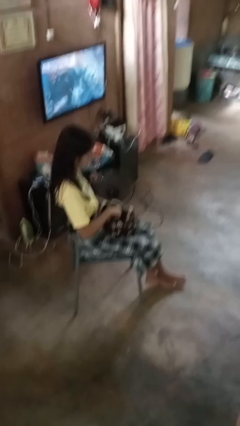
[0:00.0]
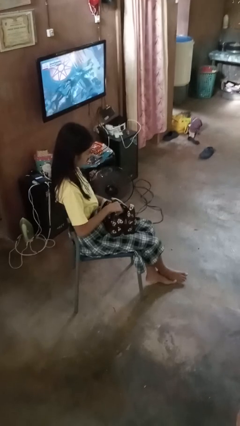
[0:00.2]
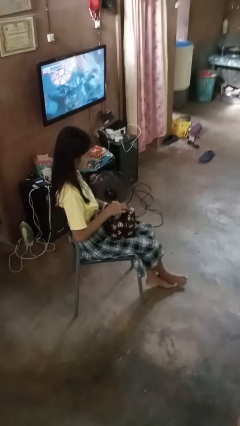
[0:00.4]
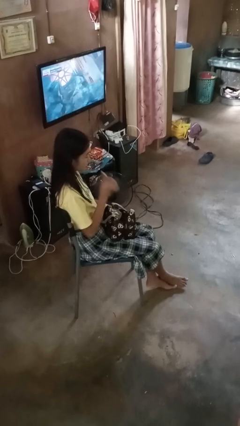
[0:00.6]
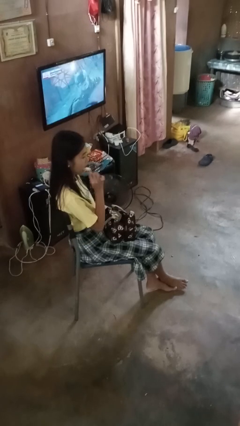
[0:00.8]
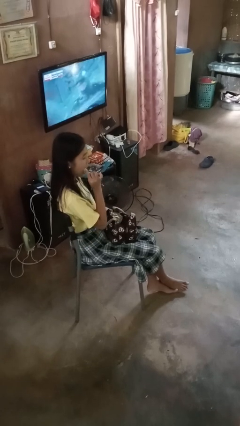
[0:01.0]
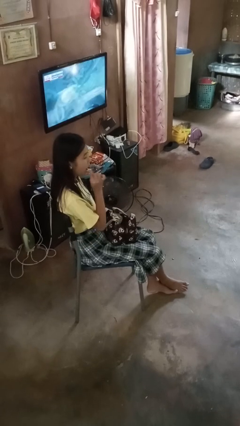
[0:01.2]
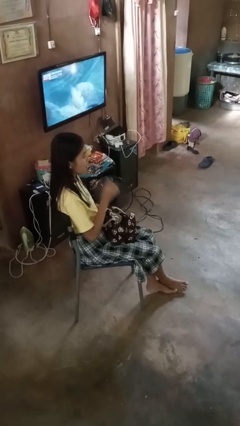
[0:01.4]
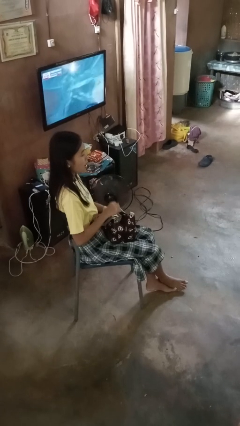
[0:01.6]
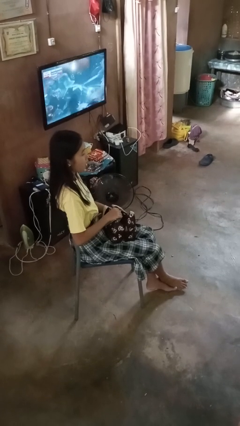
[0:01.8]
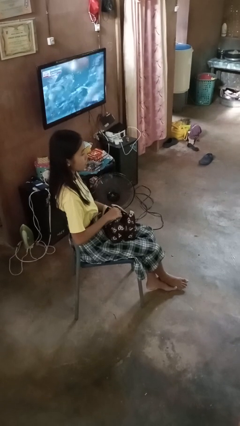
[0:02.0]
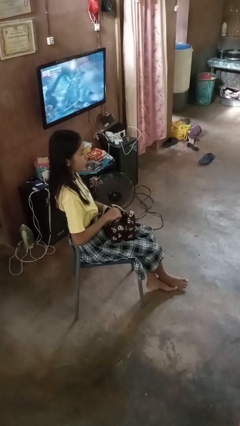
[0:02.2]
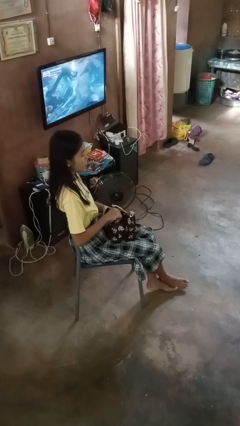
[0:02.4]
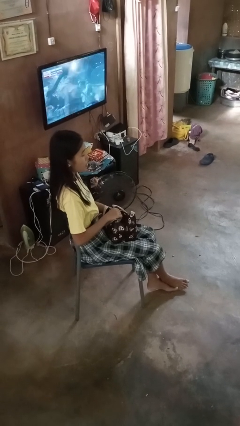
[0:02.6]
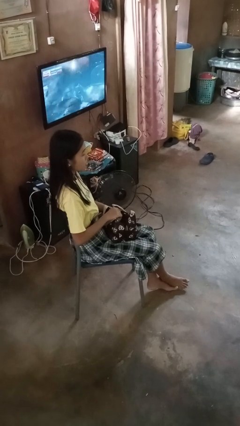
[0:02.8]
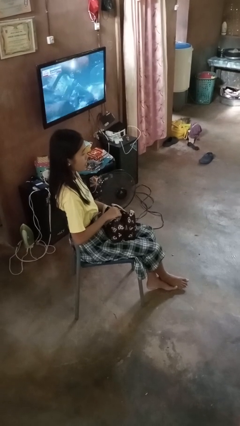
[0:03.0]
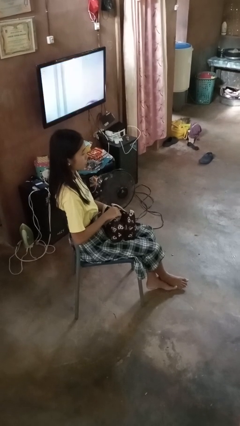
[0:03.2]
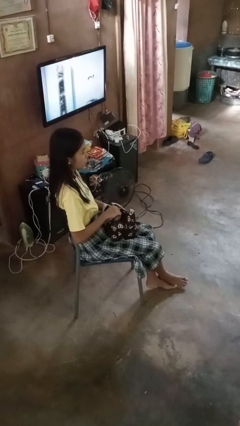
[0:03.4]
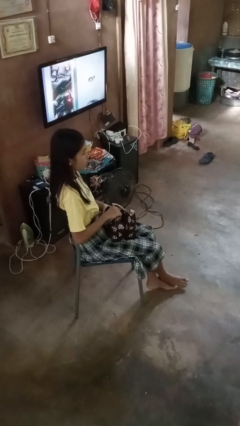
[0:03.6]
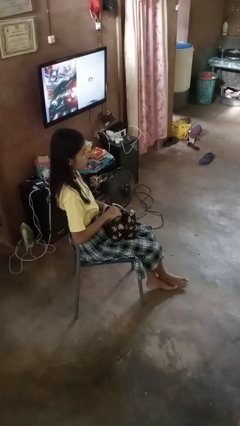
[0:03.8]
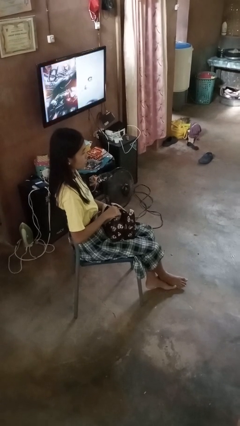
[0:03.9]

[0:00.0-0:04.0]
person eats snack from bag

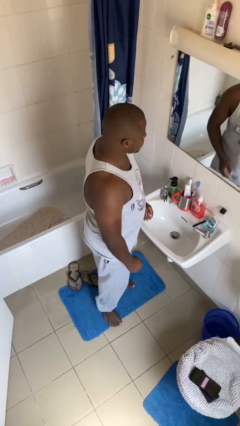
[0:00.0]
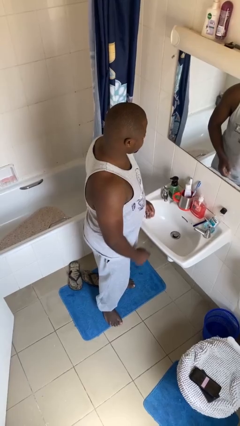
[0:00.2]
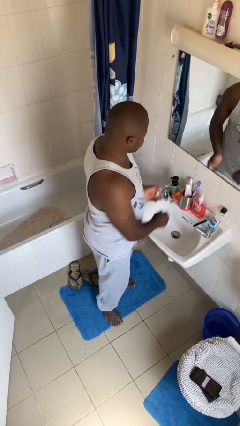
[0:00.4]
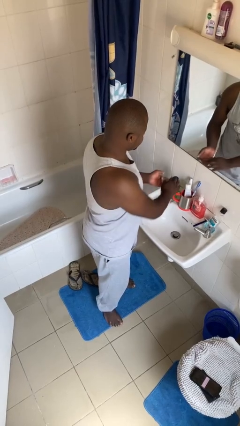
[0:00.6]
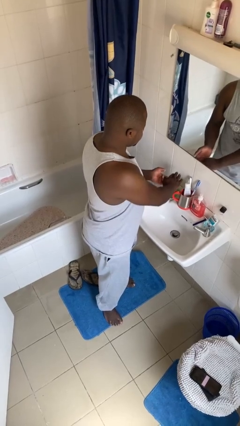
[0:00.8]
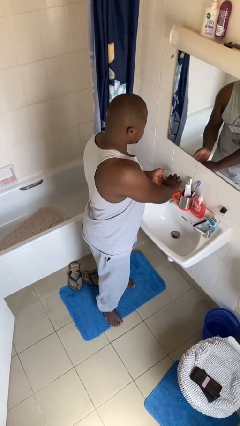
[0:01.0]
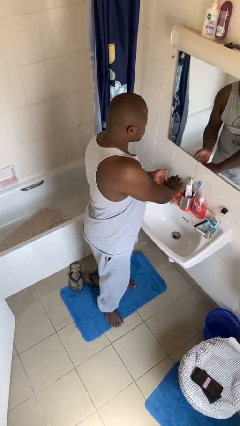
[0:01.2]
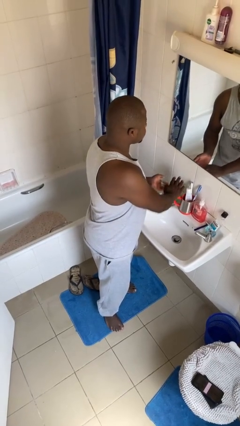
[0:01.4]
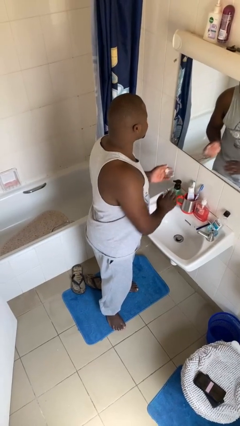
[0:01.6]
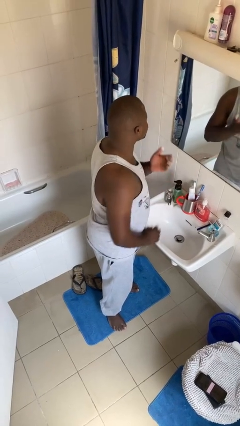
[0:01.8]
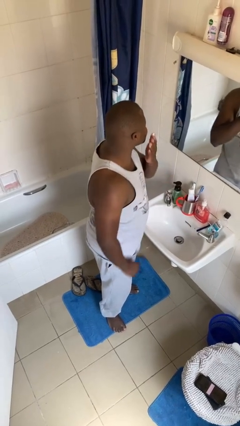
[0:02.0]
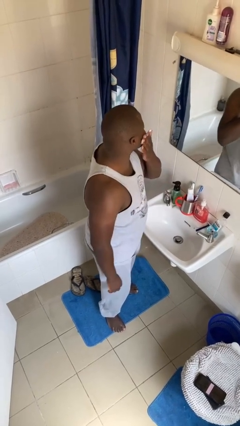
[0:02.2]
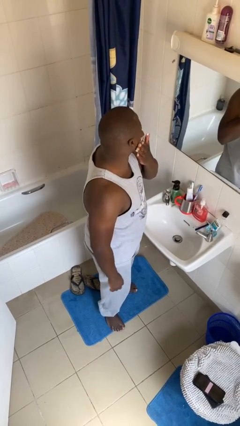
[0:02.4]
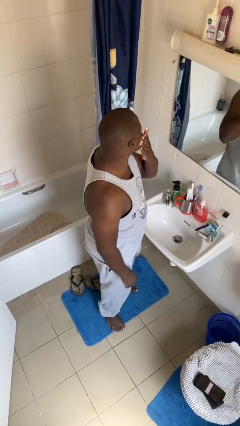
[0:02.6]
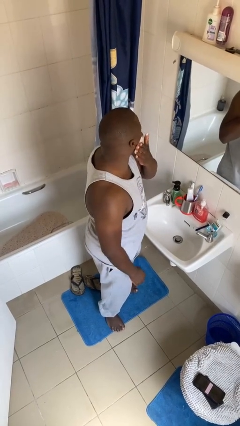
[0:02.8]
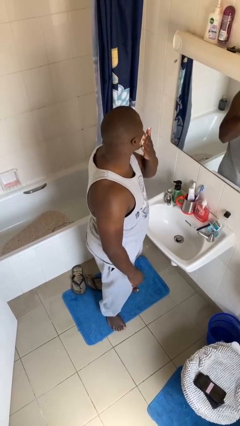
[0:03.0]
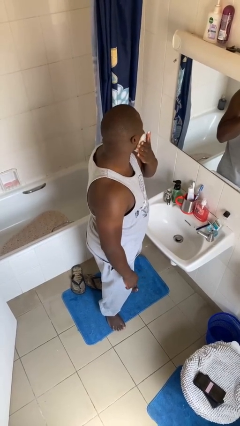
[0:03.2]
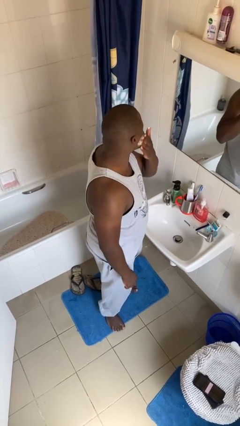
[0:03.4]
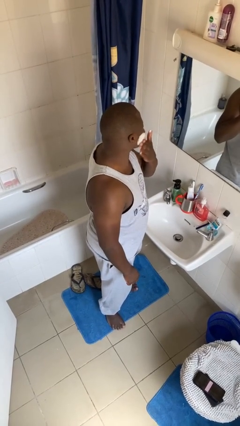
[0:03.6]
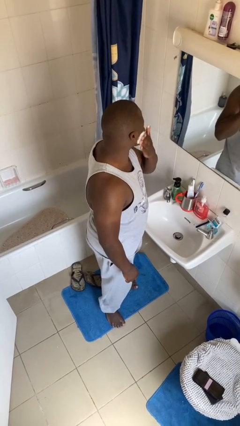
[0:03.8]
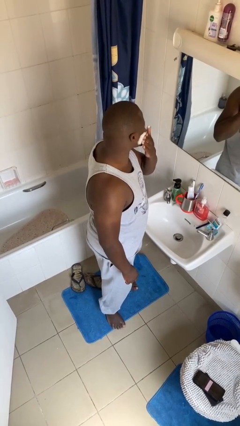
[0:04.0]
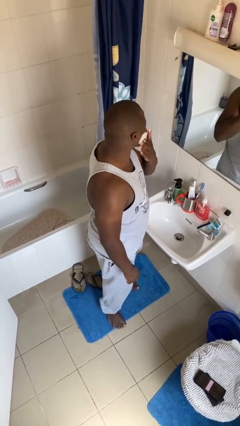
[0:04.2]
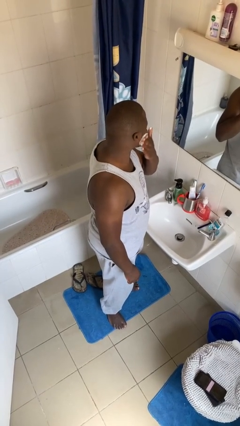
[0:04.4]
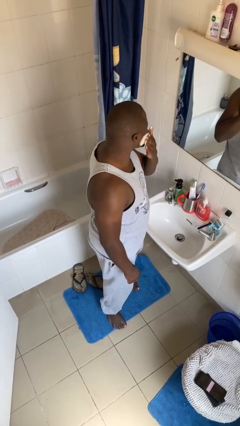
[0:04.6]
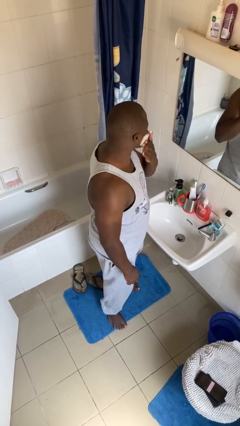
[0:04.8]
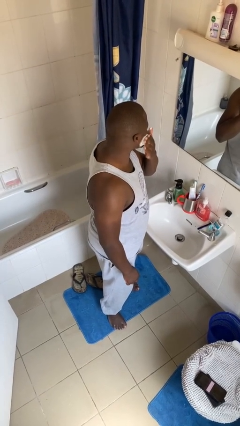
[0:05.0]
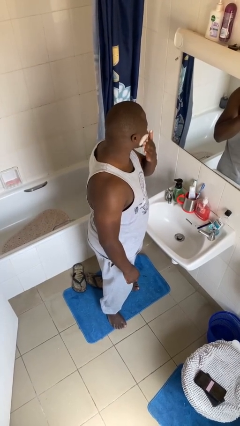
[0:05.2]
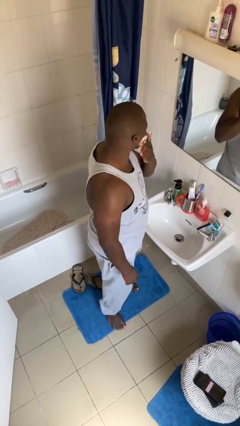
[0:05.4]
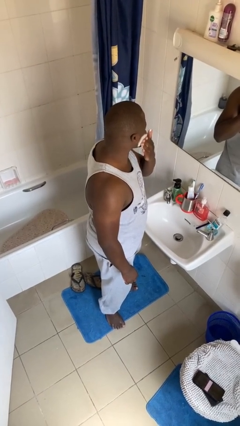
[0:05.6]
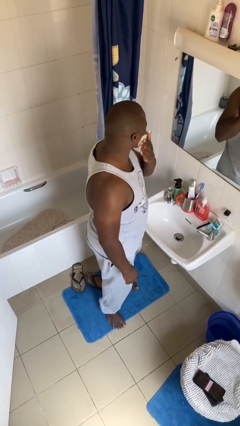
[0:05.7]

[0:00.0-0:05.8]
person applies shaving cream

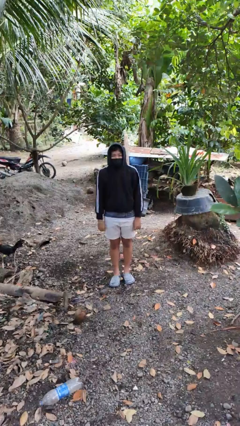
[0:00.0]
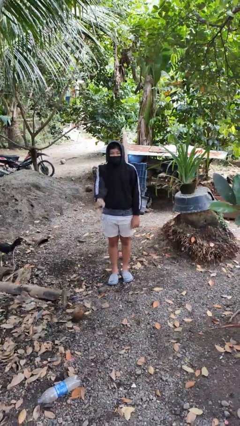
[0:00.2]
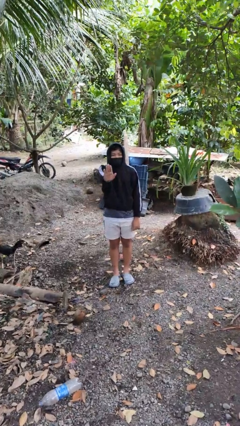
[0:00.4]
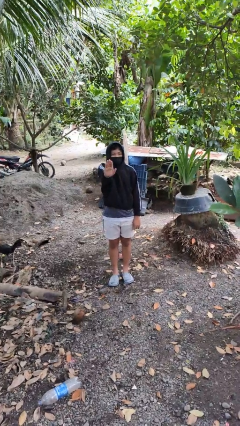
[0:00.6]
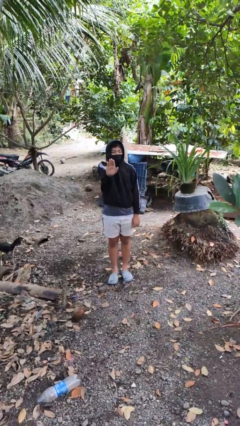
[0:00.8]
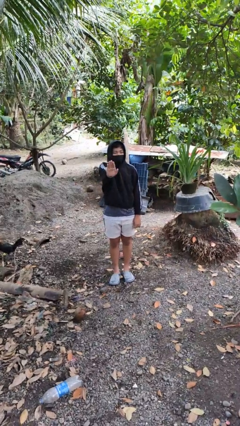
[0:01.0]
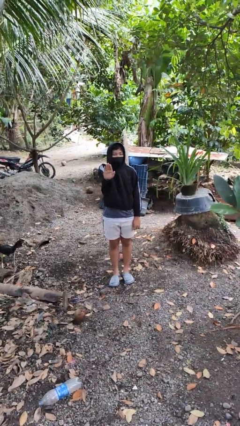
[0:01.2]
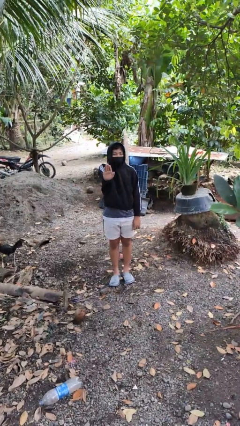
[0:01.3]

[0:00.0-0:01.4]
person gestures stop

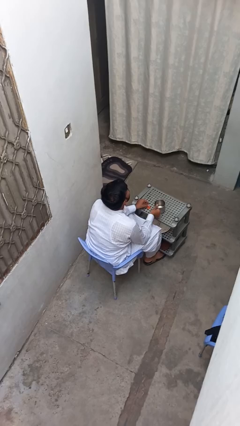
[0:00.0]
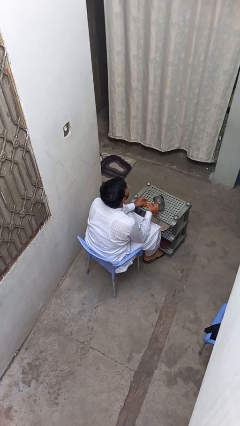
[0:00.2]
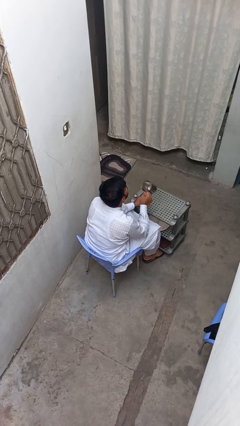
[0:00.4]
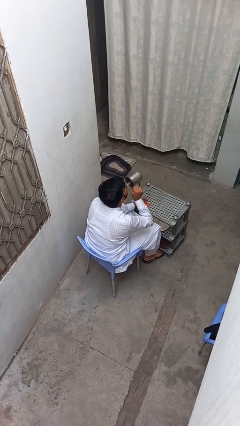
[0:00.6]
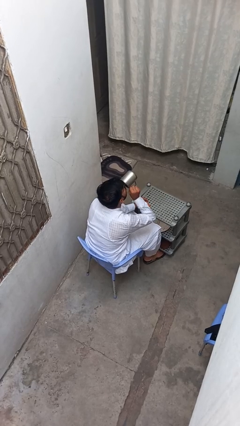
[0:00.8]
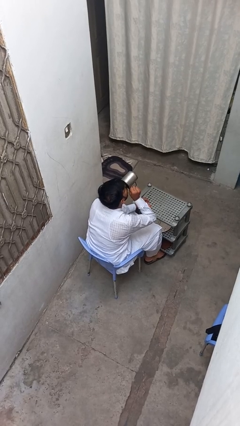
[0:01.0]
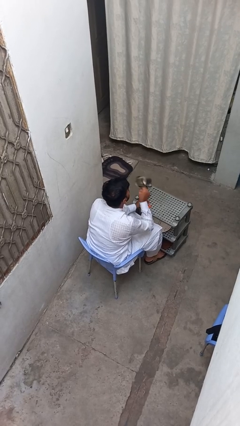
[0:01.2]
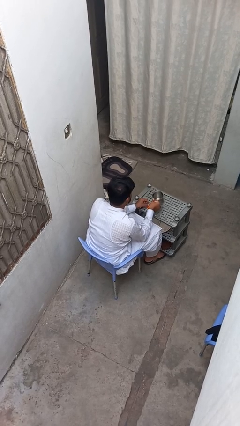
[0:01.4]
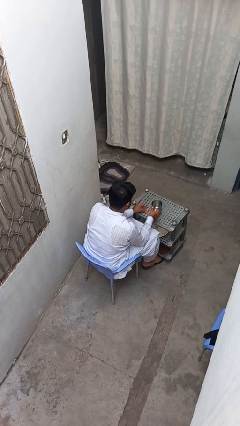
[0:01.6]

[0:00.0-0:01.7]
person drinks from cup

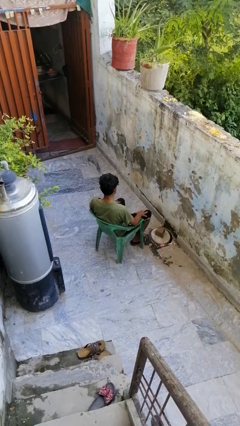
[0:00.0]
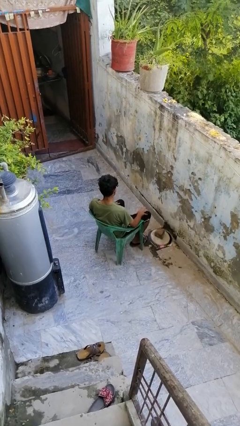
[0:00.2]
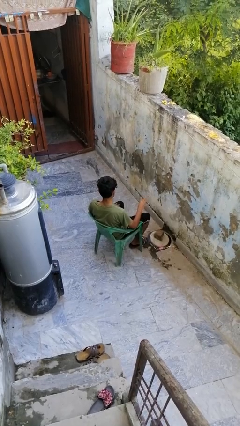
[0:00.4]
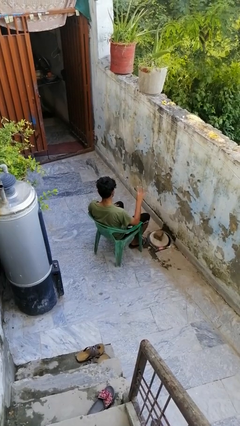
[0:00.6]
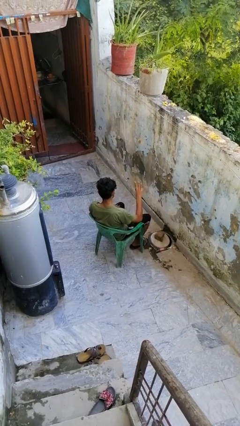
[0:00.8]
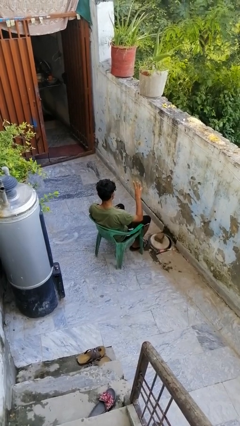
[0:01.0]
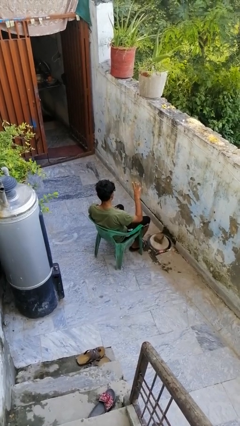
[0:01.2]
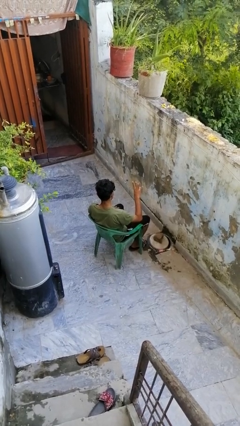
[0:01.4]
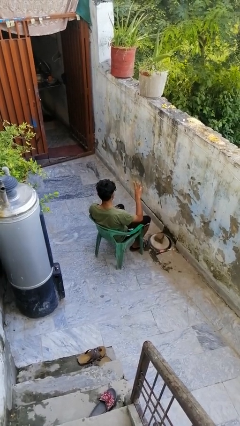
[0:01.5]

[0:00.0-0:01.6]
person gestures number four

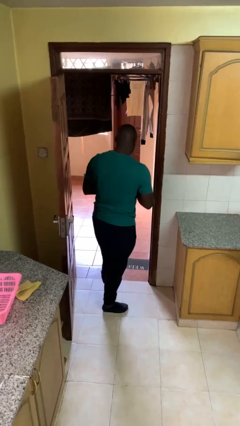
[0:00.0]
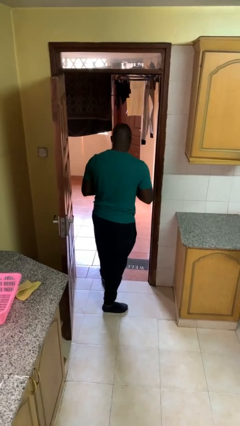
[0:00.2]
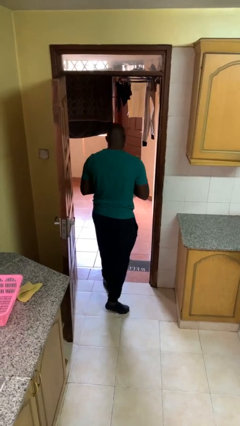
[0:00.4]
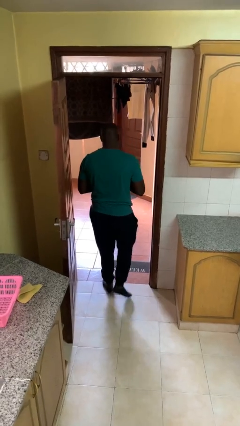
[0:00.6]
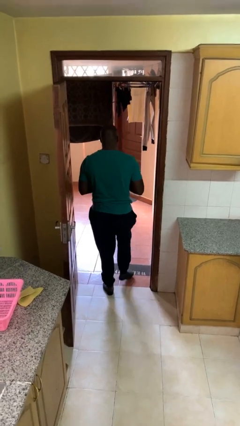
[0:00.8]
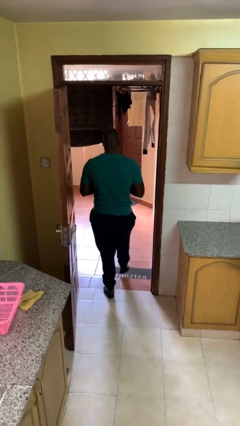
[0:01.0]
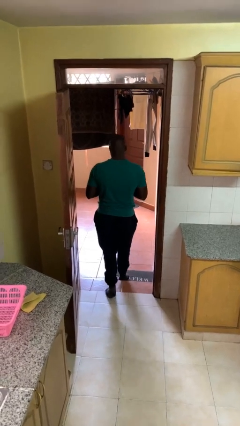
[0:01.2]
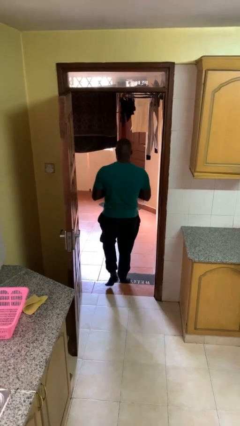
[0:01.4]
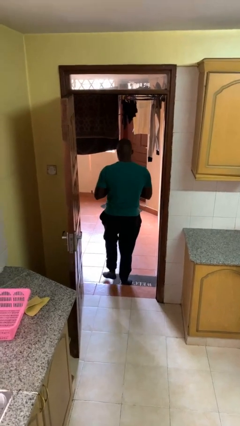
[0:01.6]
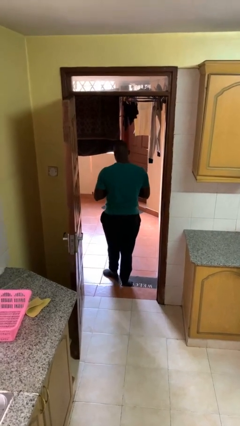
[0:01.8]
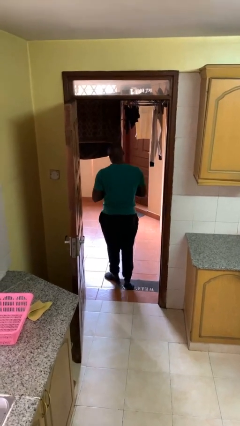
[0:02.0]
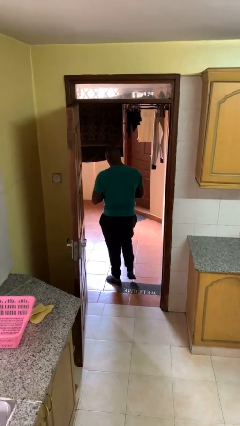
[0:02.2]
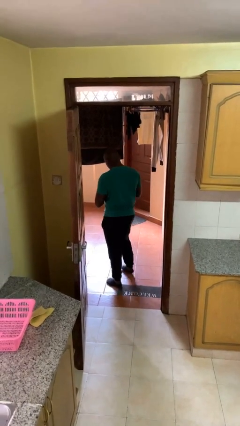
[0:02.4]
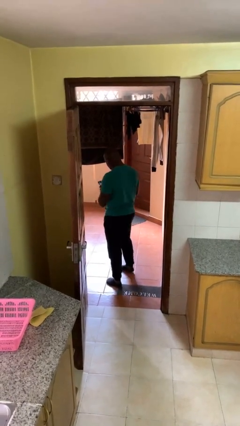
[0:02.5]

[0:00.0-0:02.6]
person exits scene through structure
